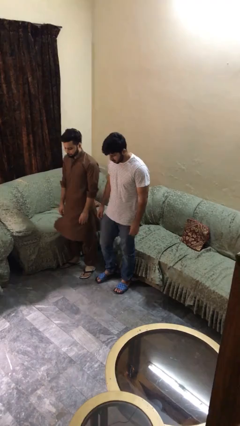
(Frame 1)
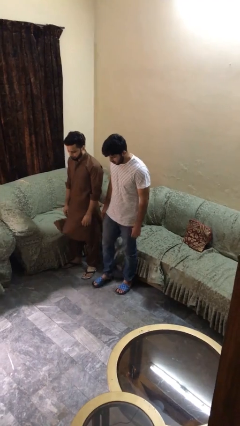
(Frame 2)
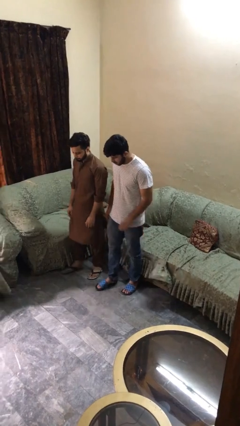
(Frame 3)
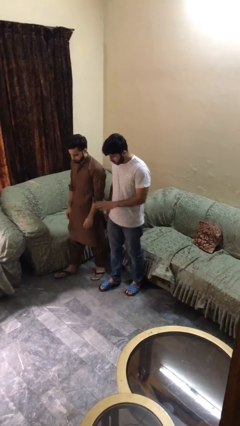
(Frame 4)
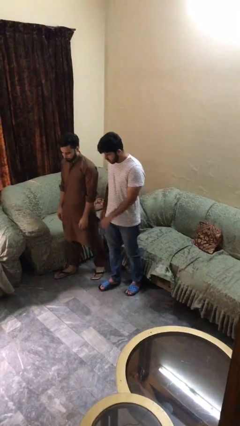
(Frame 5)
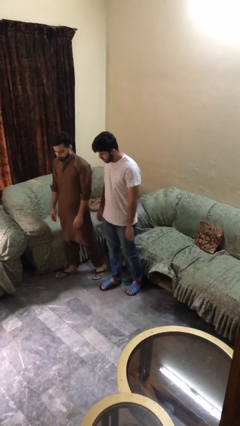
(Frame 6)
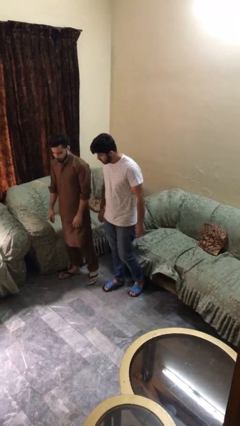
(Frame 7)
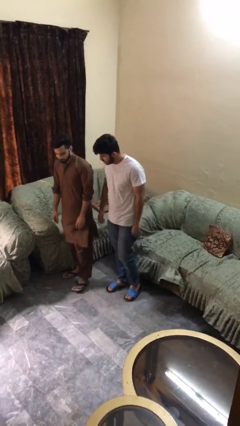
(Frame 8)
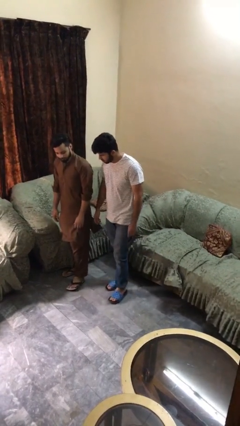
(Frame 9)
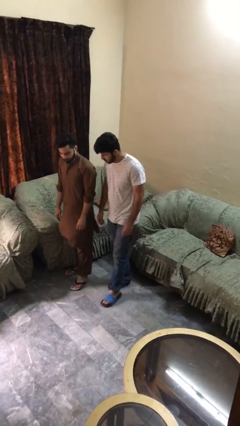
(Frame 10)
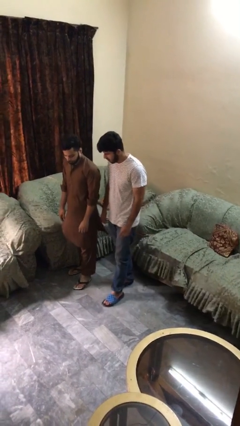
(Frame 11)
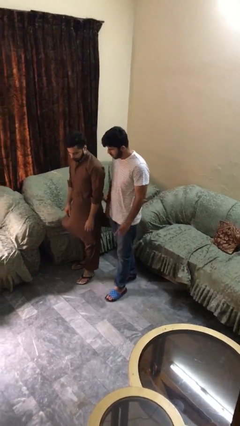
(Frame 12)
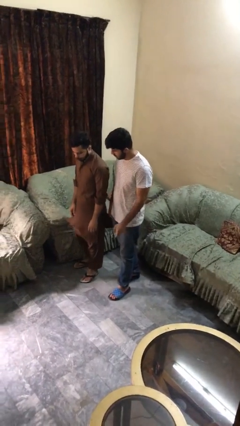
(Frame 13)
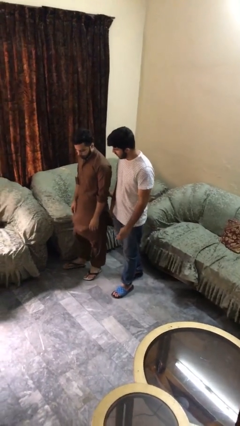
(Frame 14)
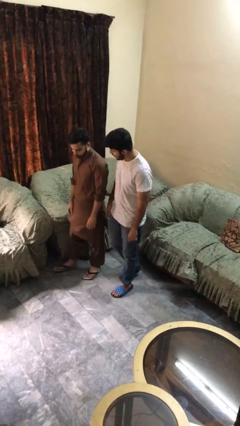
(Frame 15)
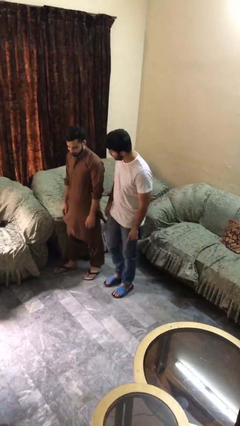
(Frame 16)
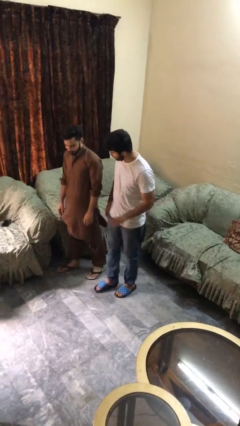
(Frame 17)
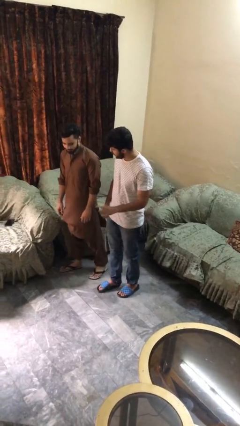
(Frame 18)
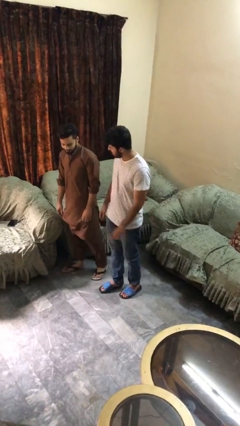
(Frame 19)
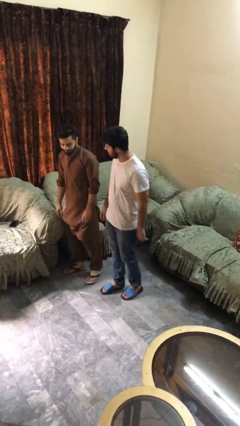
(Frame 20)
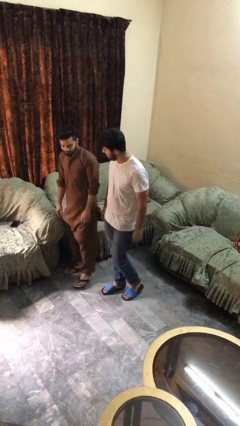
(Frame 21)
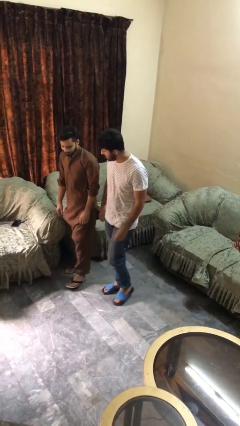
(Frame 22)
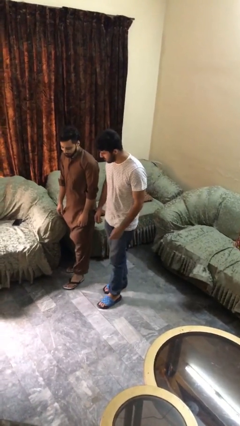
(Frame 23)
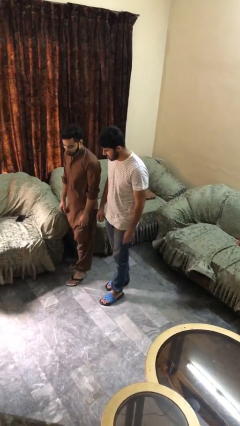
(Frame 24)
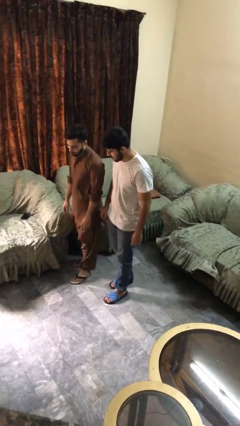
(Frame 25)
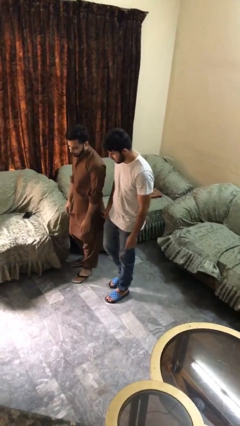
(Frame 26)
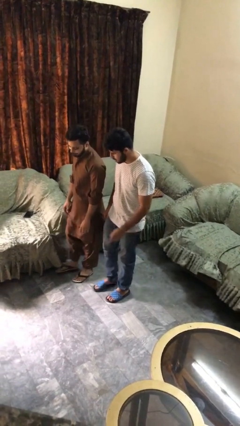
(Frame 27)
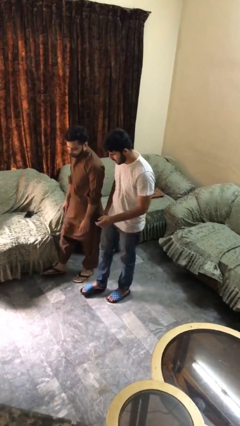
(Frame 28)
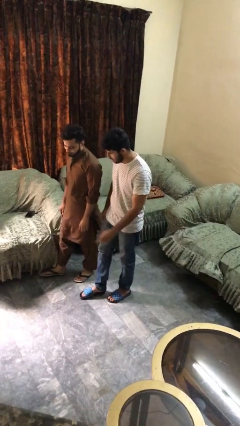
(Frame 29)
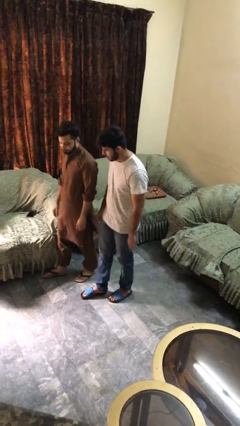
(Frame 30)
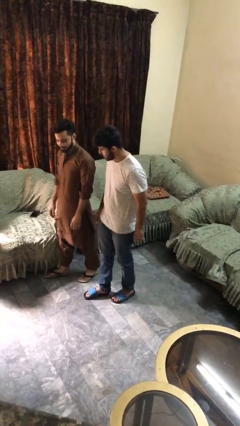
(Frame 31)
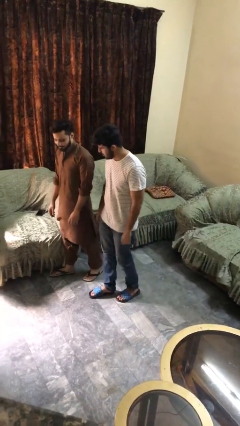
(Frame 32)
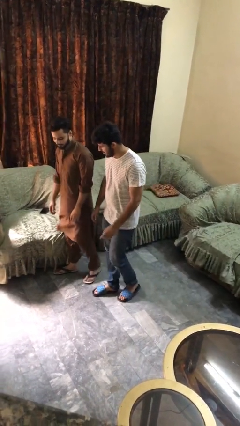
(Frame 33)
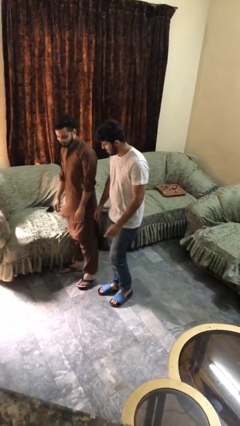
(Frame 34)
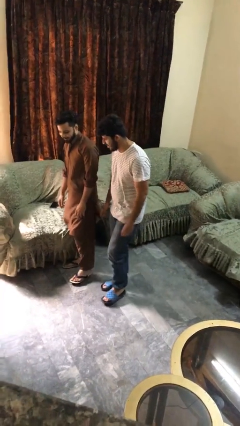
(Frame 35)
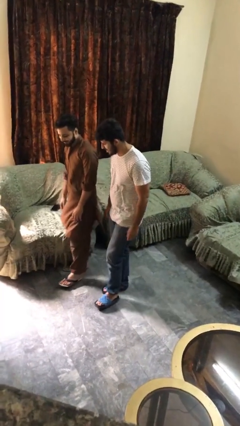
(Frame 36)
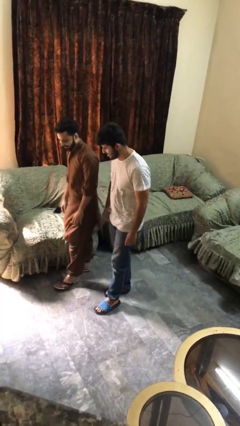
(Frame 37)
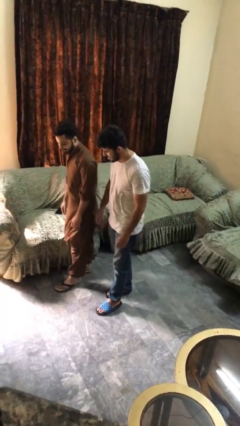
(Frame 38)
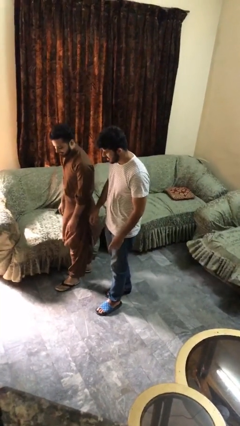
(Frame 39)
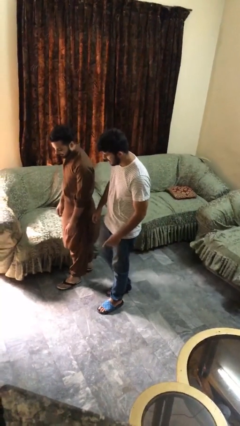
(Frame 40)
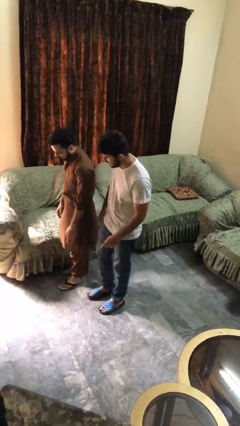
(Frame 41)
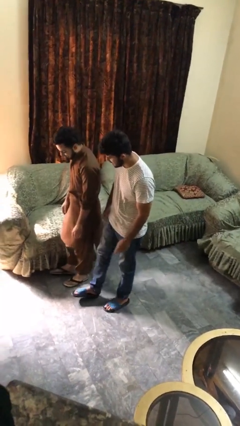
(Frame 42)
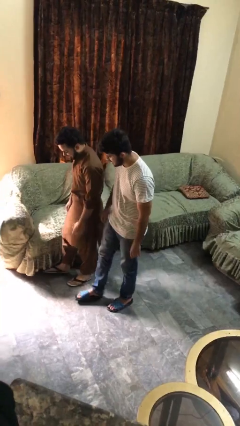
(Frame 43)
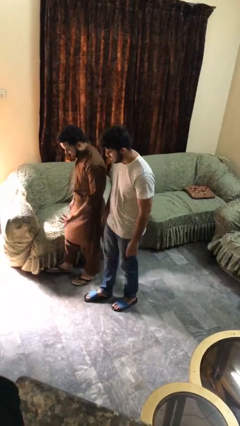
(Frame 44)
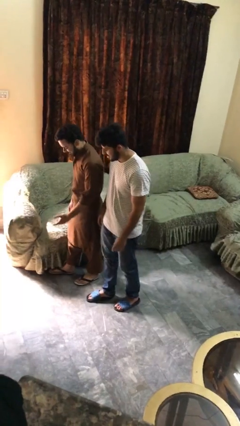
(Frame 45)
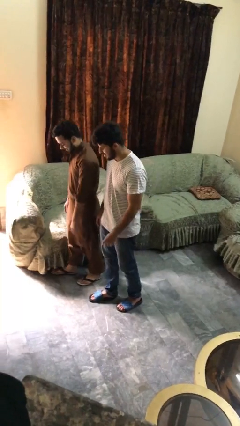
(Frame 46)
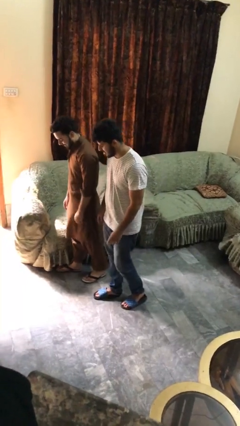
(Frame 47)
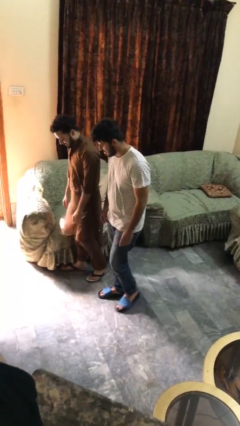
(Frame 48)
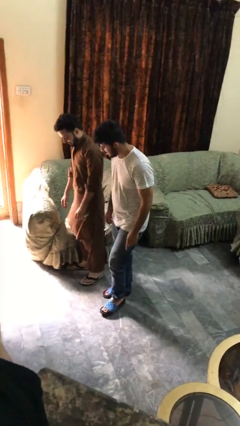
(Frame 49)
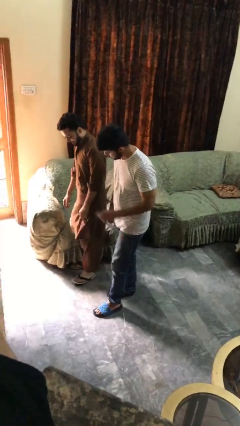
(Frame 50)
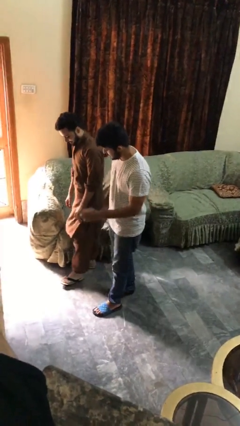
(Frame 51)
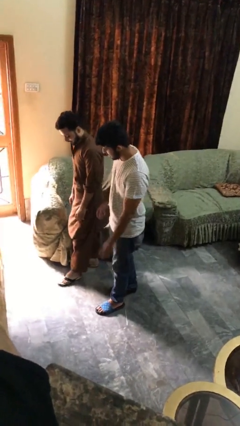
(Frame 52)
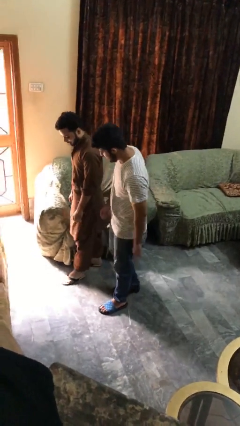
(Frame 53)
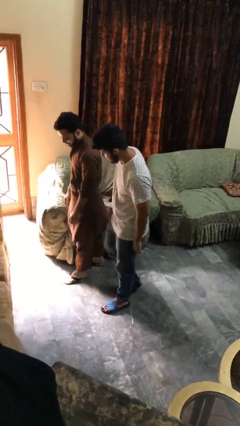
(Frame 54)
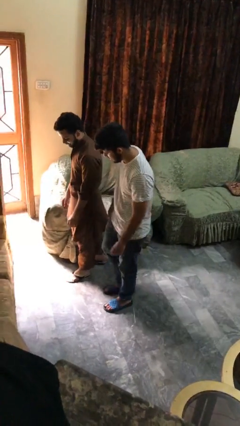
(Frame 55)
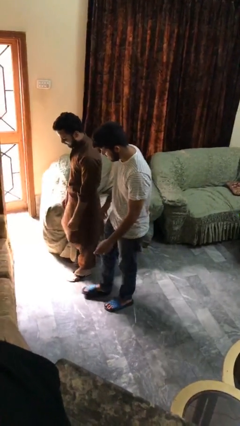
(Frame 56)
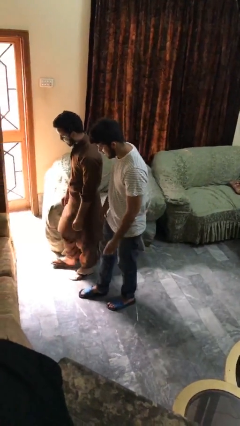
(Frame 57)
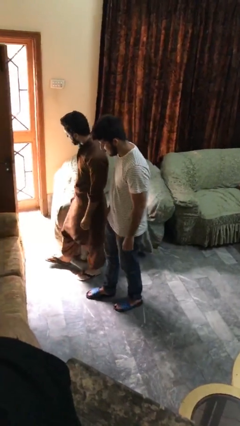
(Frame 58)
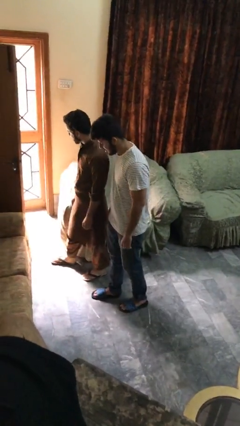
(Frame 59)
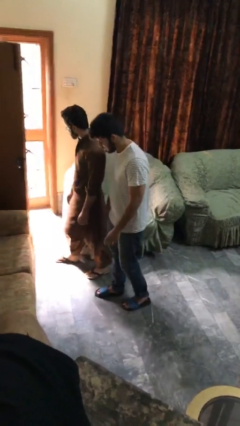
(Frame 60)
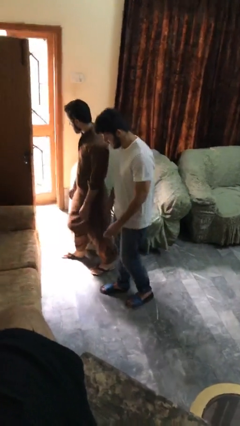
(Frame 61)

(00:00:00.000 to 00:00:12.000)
person talks to person

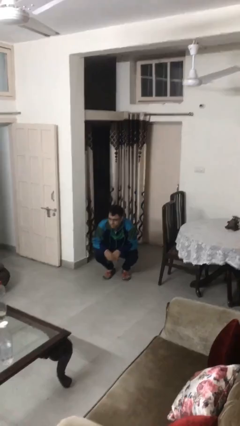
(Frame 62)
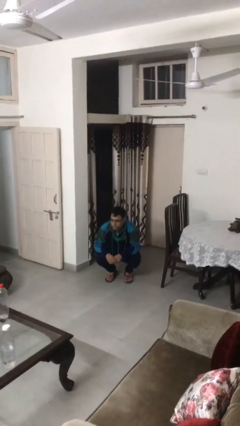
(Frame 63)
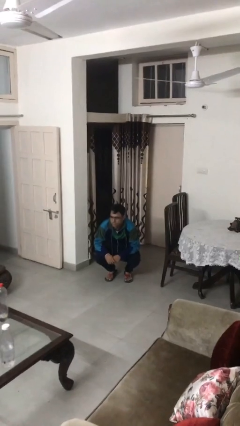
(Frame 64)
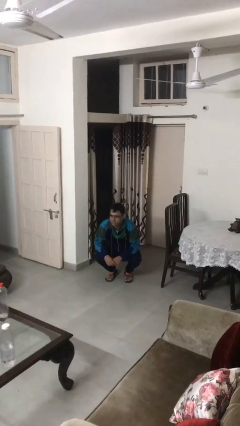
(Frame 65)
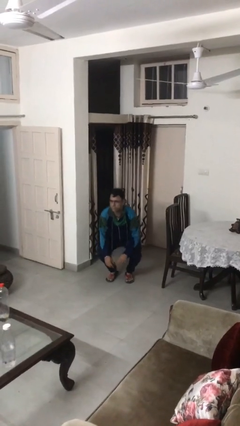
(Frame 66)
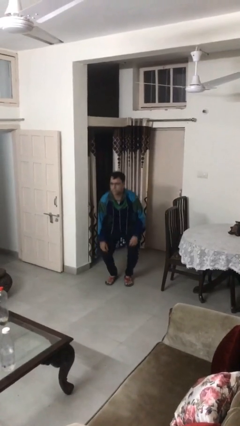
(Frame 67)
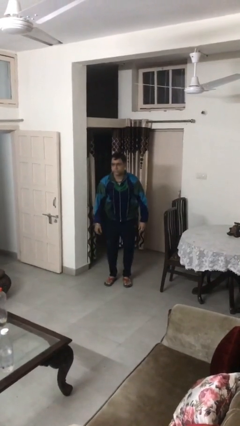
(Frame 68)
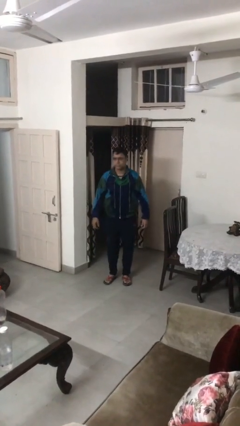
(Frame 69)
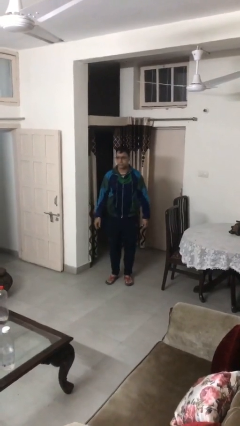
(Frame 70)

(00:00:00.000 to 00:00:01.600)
person stands up

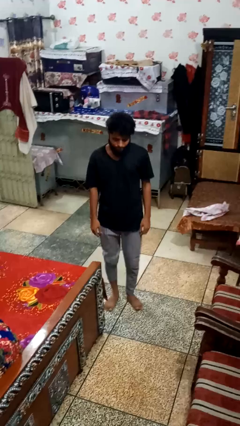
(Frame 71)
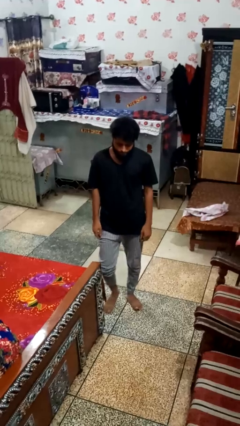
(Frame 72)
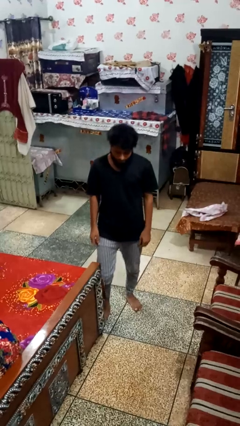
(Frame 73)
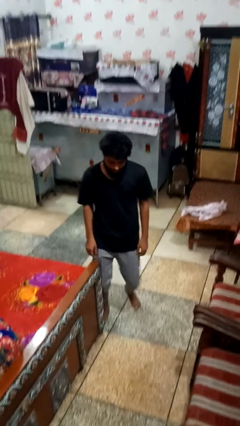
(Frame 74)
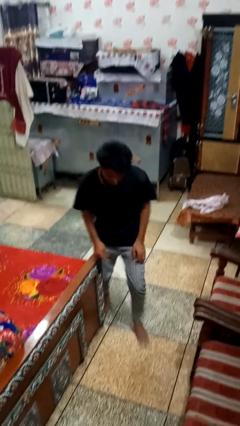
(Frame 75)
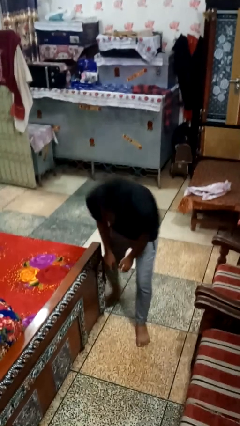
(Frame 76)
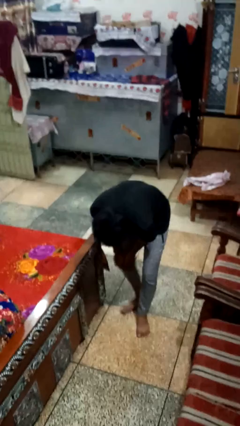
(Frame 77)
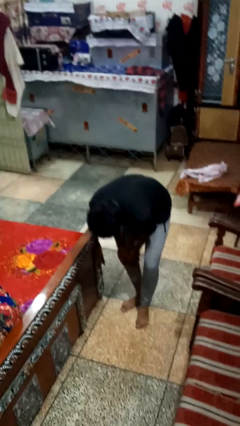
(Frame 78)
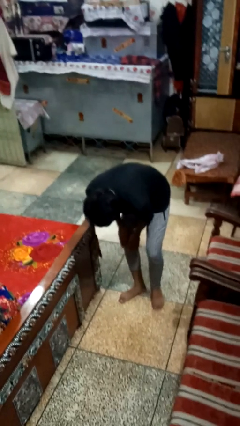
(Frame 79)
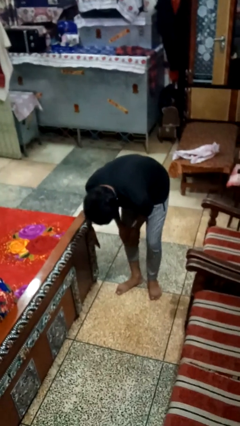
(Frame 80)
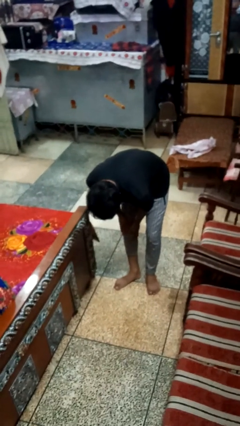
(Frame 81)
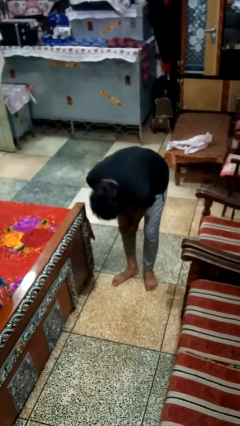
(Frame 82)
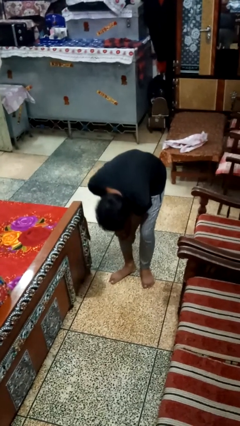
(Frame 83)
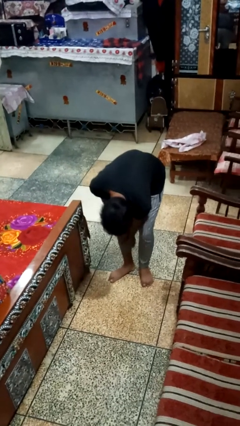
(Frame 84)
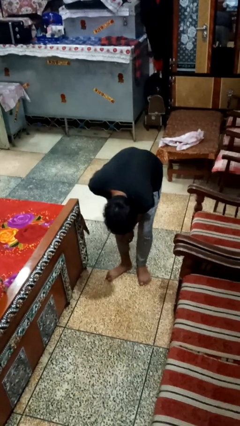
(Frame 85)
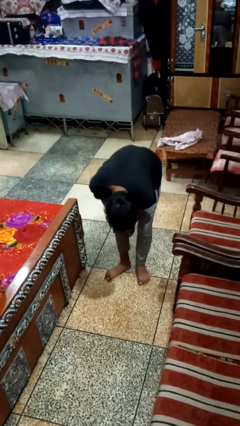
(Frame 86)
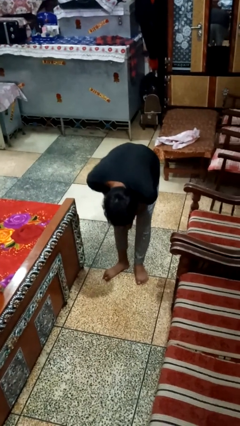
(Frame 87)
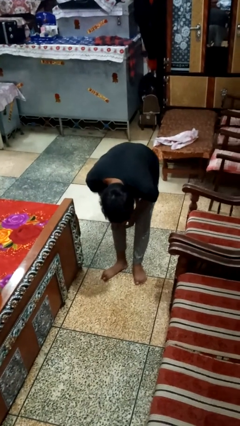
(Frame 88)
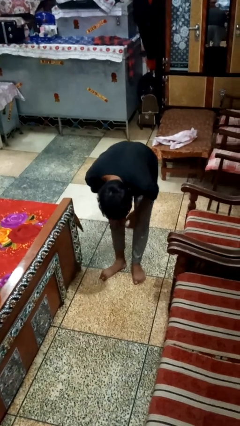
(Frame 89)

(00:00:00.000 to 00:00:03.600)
person trips on object on floor

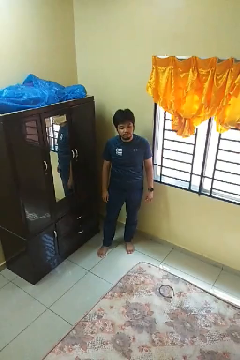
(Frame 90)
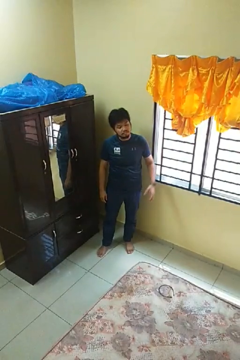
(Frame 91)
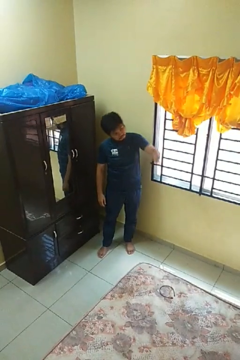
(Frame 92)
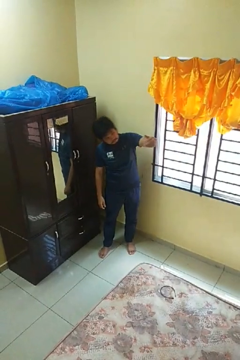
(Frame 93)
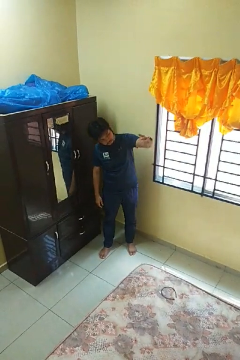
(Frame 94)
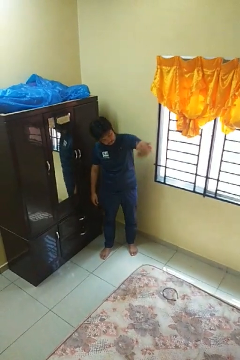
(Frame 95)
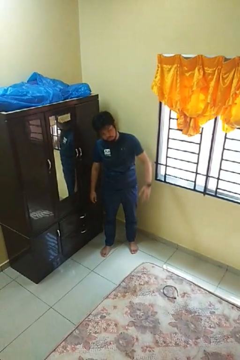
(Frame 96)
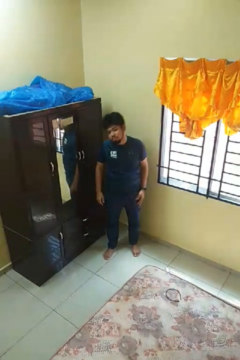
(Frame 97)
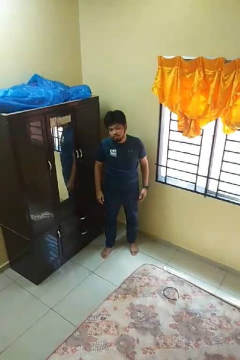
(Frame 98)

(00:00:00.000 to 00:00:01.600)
person gestures come here
